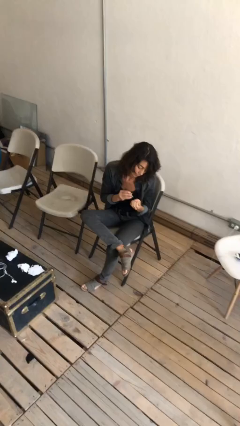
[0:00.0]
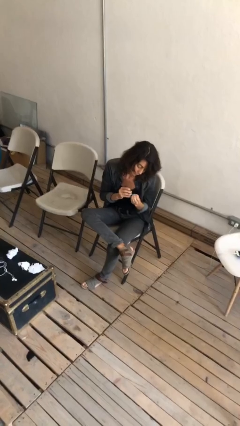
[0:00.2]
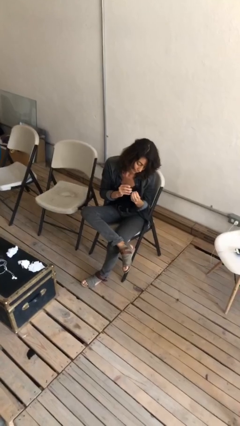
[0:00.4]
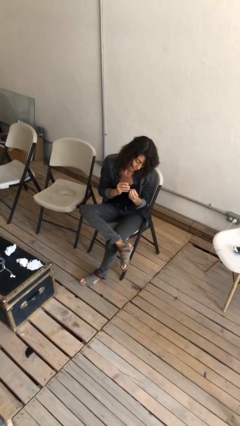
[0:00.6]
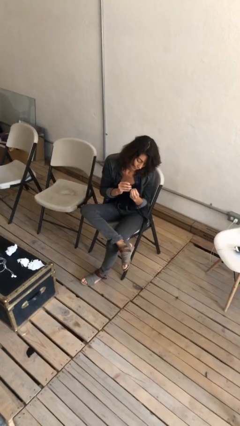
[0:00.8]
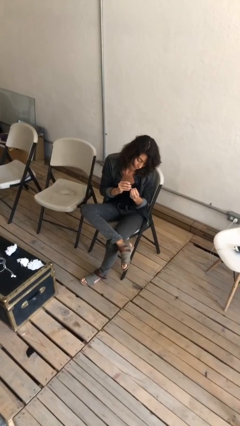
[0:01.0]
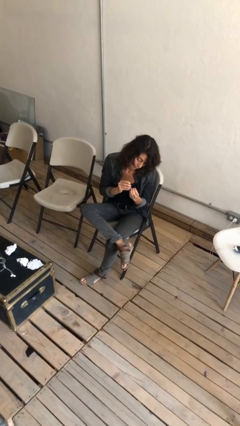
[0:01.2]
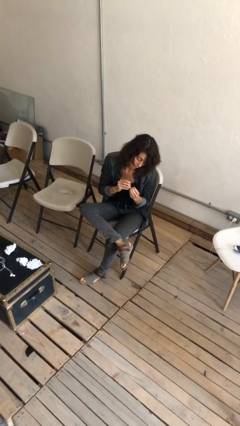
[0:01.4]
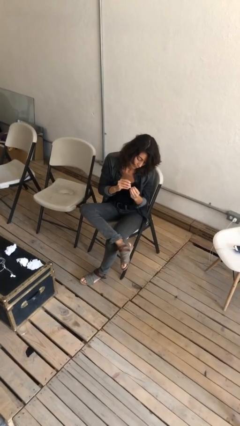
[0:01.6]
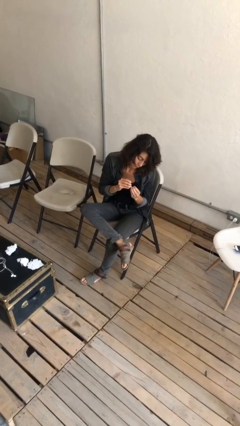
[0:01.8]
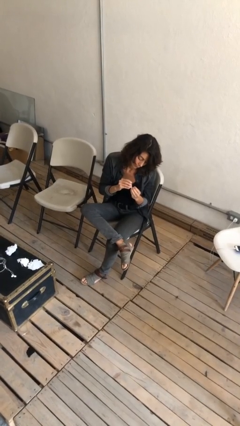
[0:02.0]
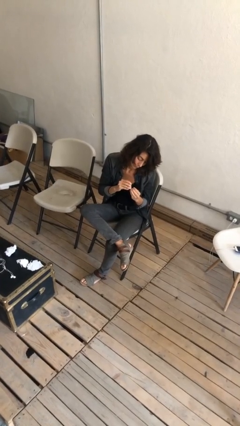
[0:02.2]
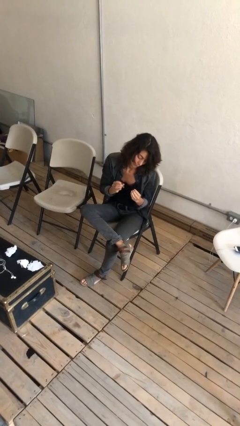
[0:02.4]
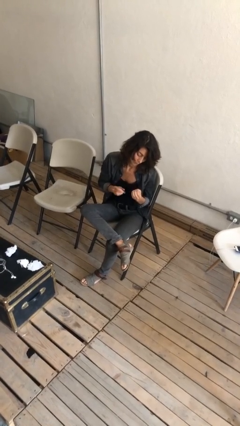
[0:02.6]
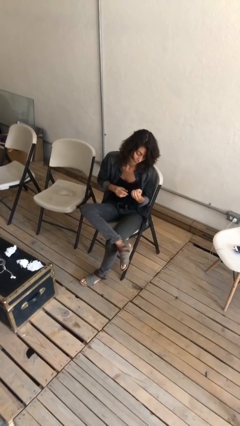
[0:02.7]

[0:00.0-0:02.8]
person clips fingernails

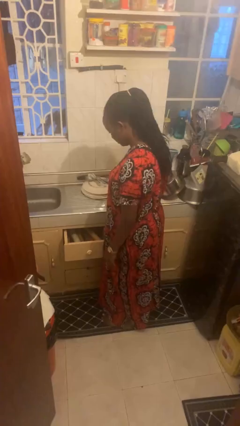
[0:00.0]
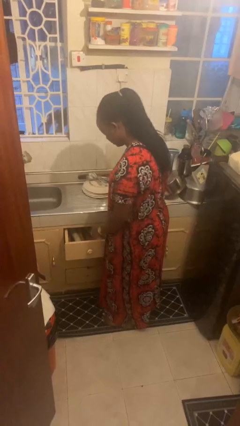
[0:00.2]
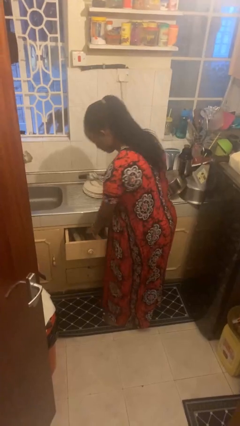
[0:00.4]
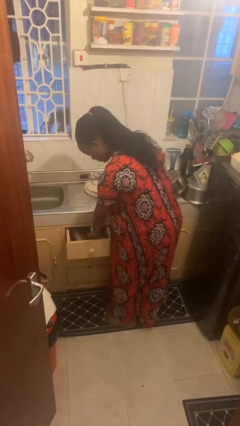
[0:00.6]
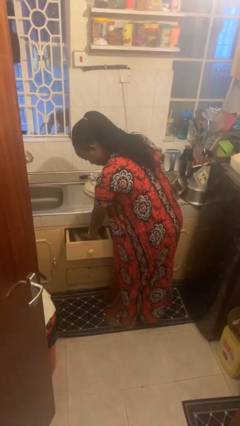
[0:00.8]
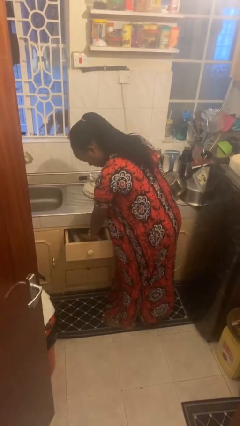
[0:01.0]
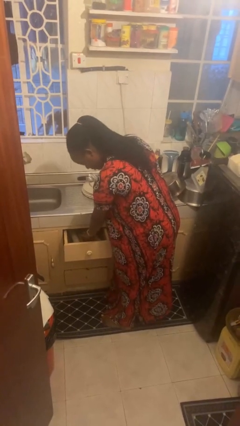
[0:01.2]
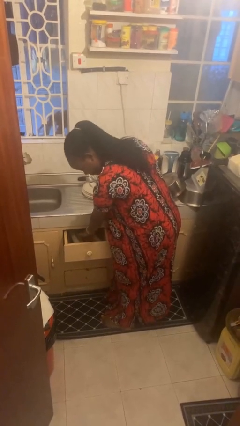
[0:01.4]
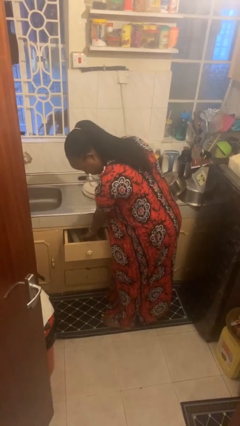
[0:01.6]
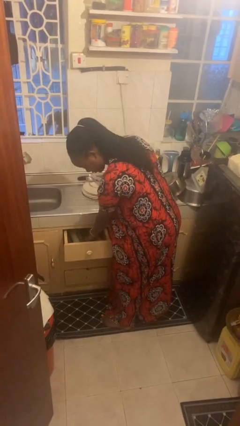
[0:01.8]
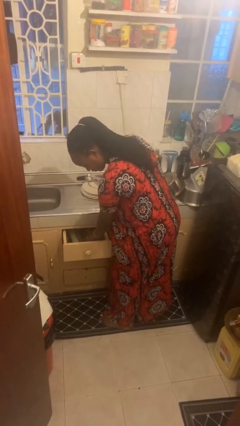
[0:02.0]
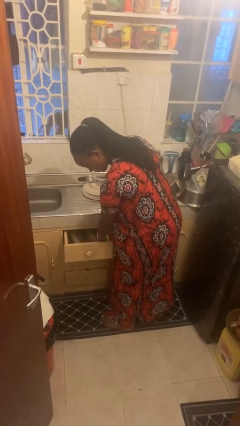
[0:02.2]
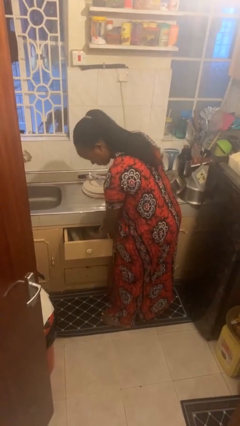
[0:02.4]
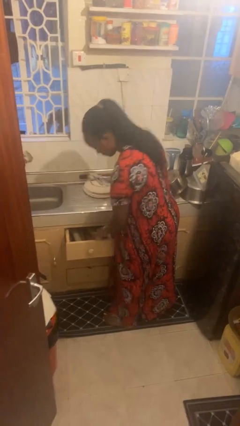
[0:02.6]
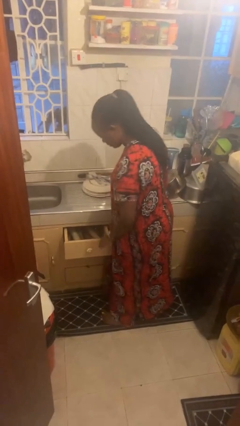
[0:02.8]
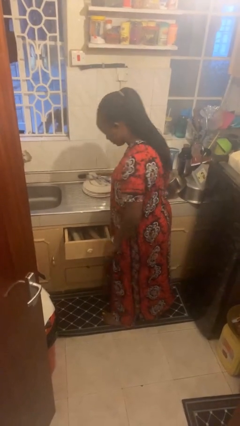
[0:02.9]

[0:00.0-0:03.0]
person searches in kitchen drawer

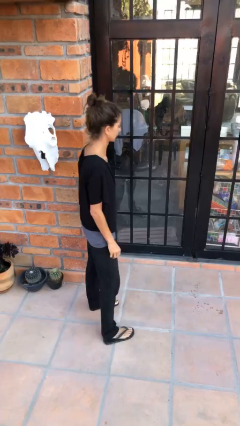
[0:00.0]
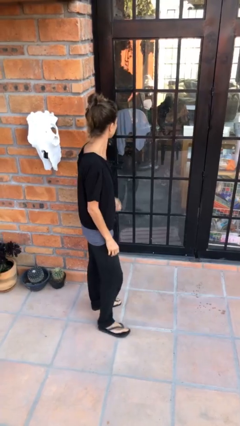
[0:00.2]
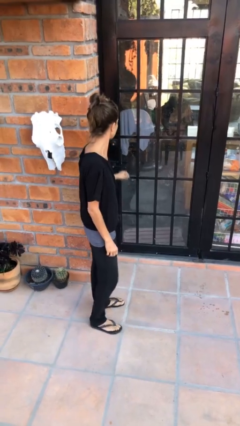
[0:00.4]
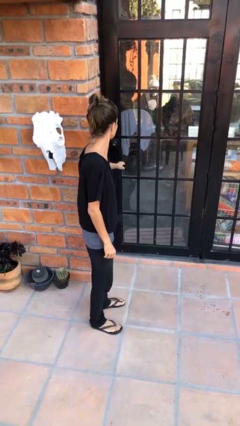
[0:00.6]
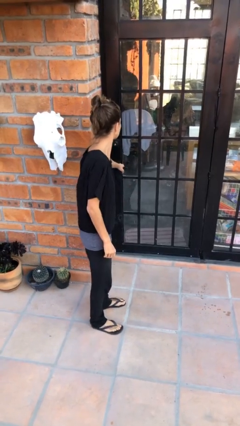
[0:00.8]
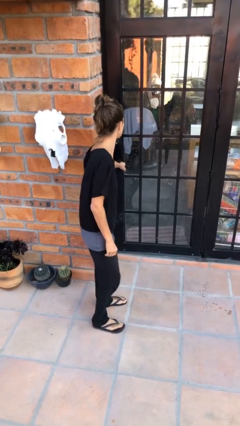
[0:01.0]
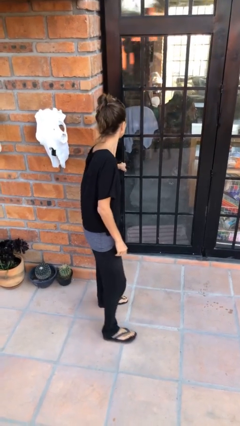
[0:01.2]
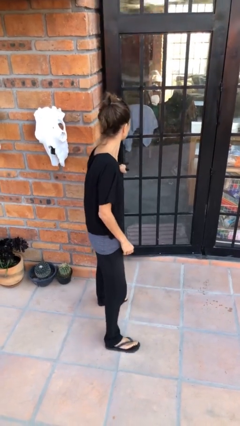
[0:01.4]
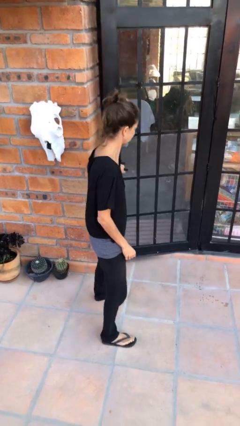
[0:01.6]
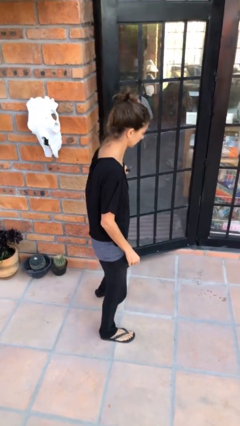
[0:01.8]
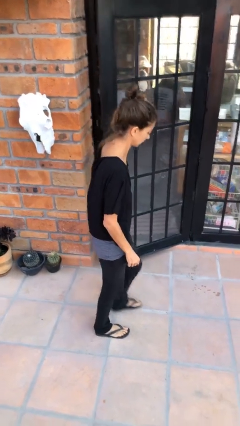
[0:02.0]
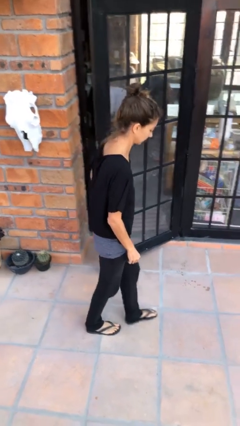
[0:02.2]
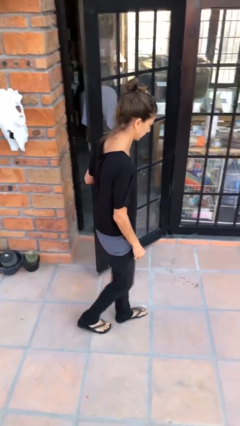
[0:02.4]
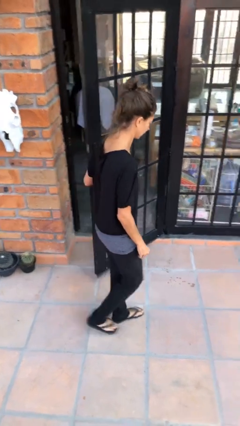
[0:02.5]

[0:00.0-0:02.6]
person opens facility door

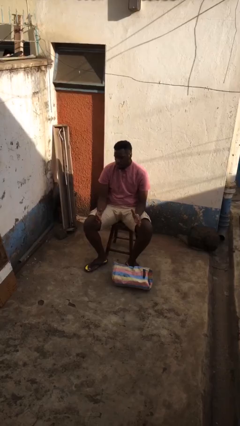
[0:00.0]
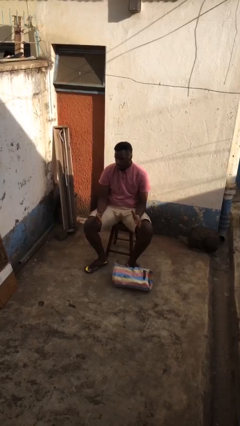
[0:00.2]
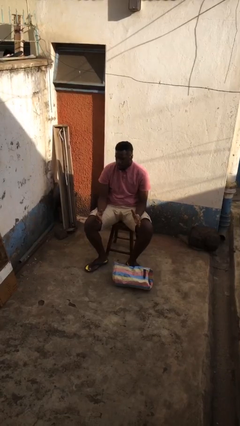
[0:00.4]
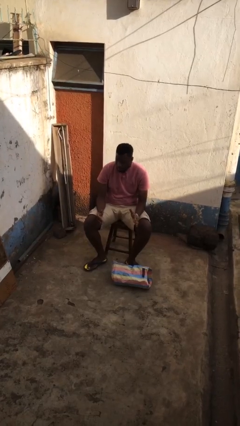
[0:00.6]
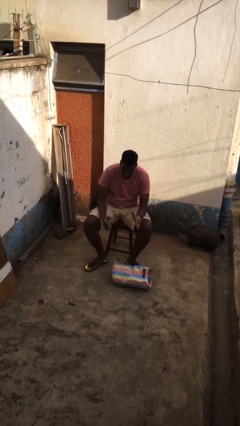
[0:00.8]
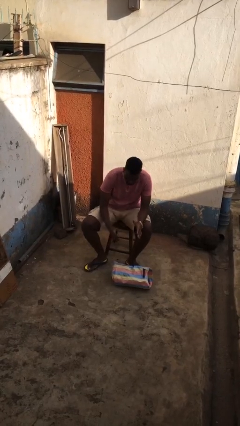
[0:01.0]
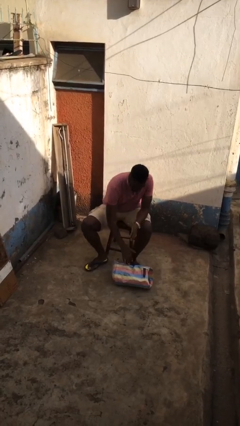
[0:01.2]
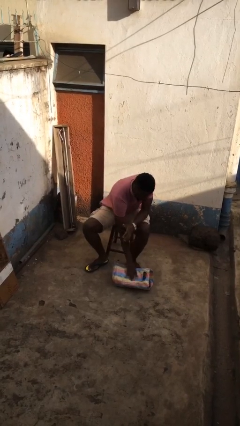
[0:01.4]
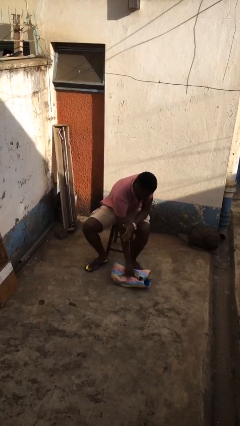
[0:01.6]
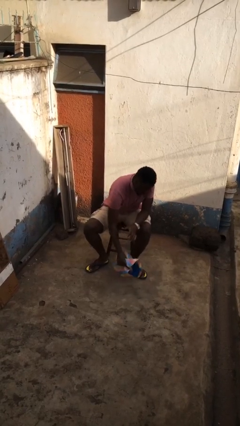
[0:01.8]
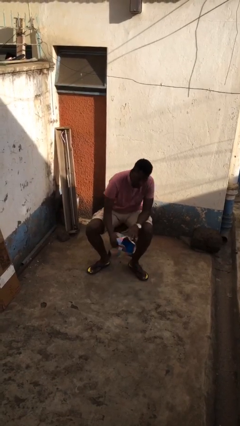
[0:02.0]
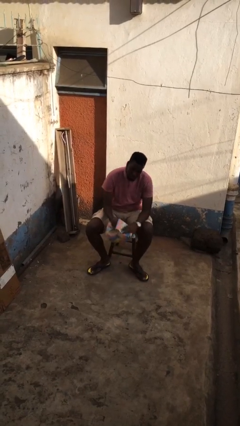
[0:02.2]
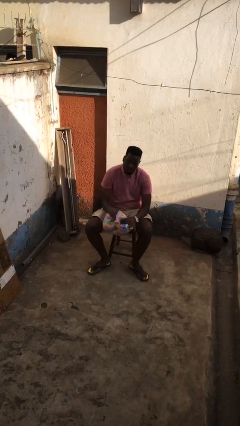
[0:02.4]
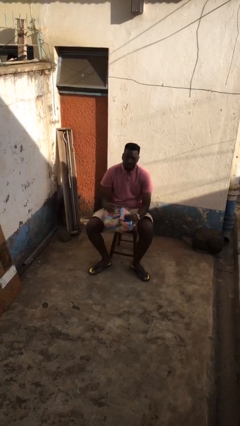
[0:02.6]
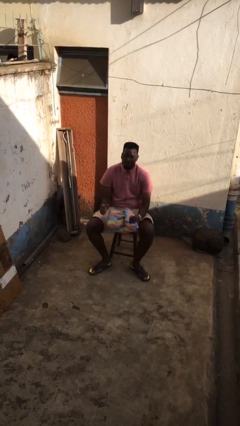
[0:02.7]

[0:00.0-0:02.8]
person picks up object from floor

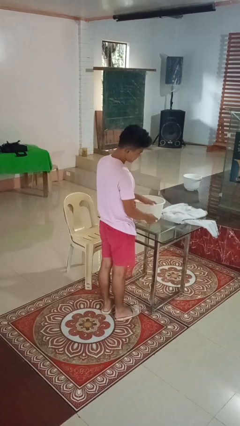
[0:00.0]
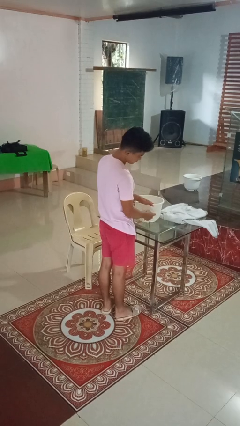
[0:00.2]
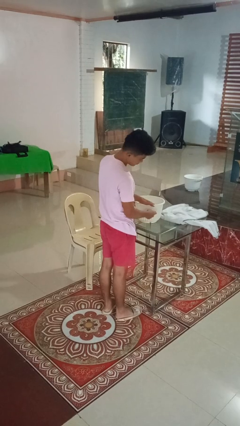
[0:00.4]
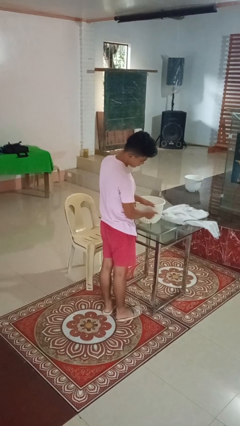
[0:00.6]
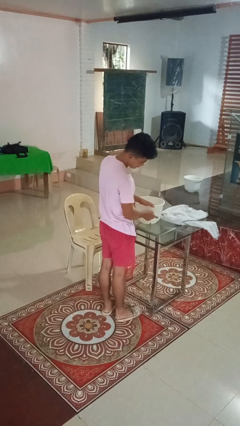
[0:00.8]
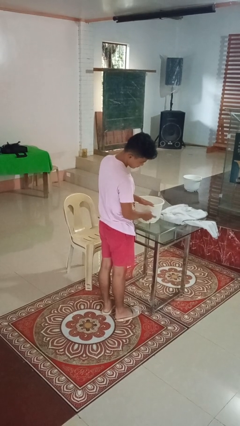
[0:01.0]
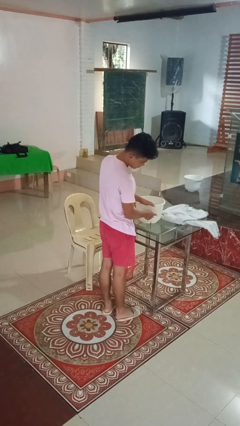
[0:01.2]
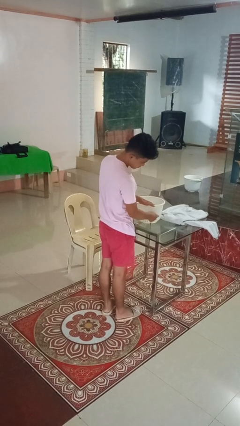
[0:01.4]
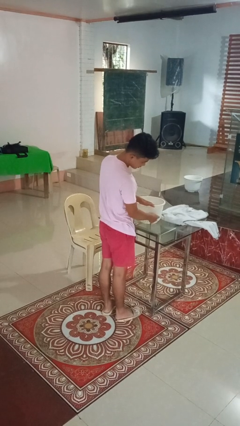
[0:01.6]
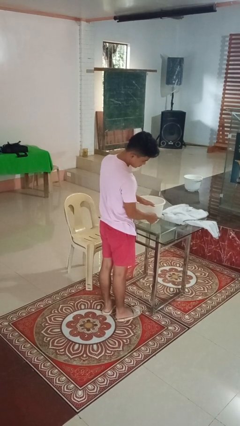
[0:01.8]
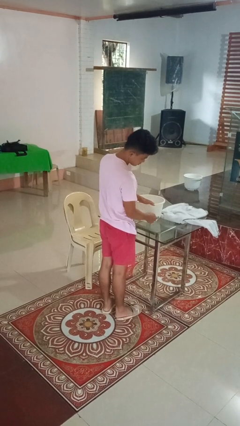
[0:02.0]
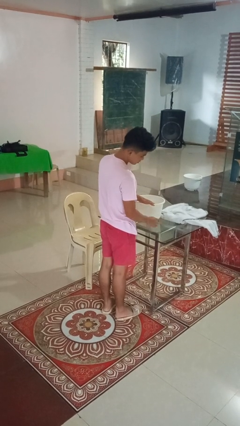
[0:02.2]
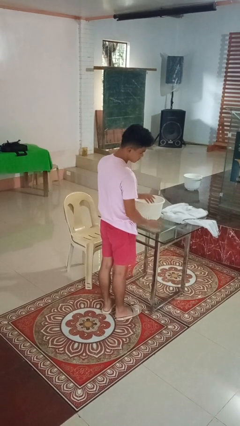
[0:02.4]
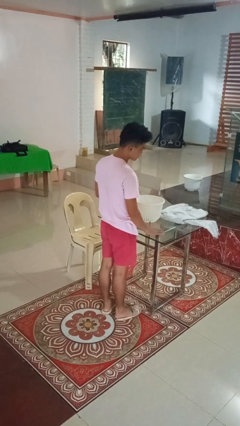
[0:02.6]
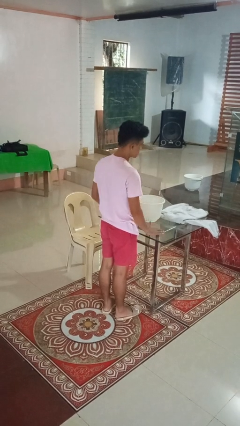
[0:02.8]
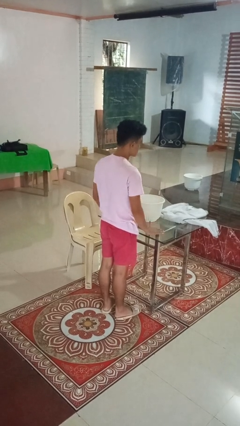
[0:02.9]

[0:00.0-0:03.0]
person taps object with finger

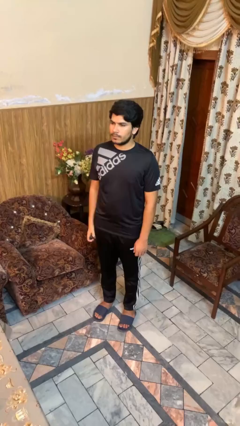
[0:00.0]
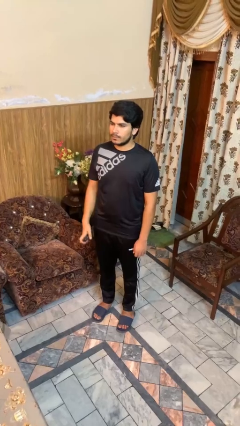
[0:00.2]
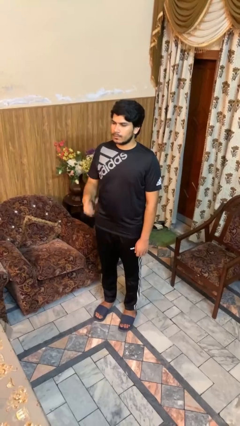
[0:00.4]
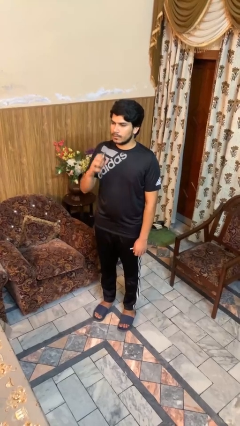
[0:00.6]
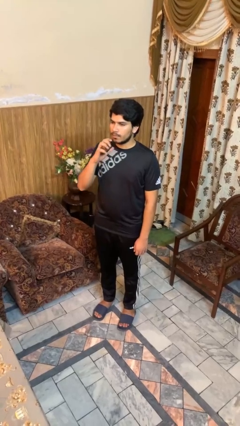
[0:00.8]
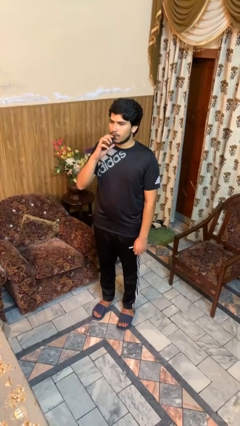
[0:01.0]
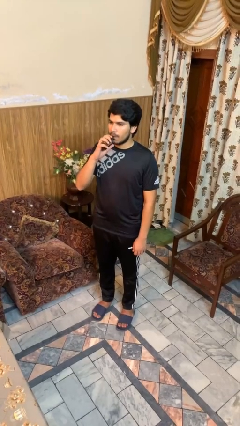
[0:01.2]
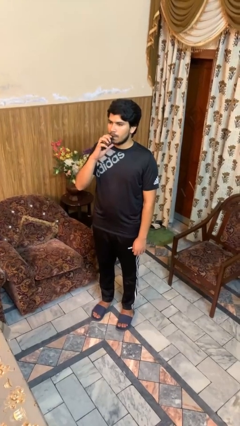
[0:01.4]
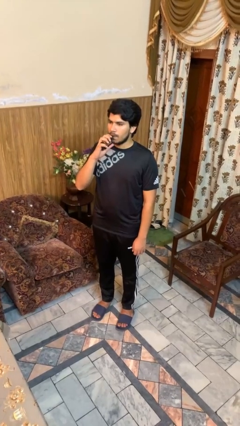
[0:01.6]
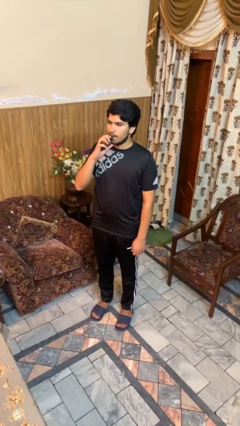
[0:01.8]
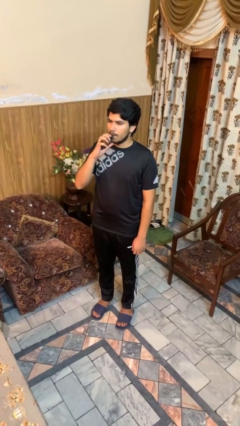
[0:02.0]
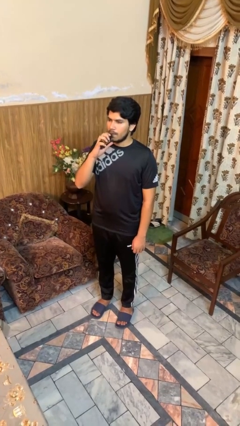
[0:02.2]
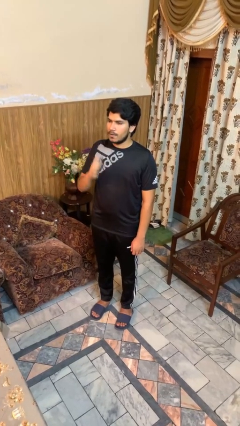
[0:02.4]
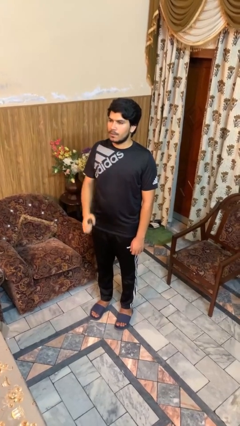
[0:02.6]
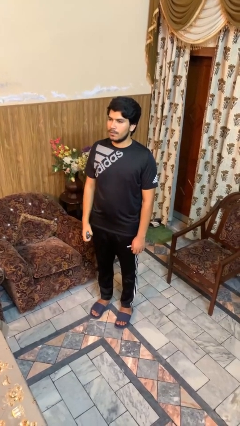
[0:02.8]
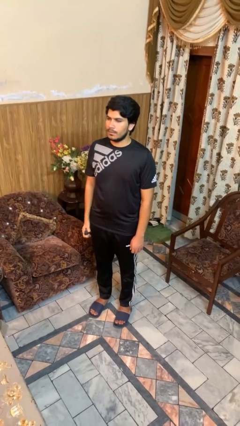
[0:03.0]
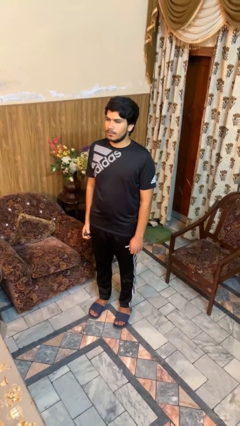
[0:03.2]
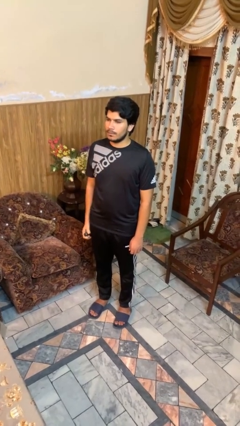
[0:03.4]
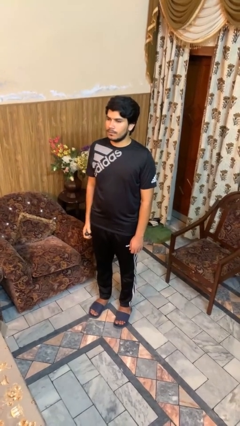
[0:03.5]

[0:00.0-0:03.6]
person vapes

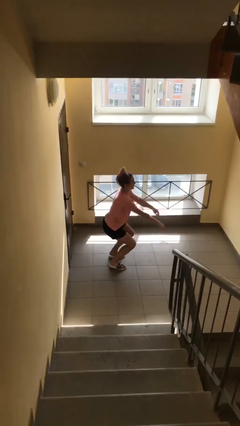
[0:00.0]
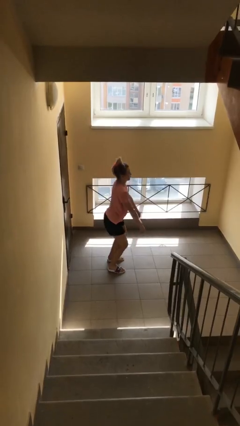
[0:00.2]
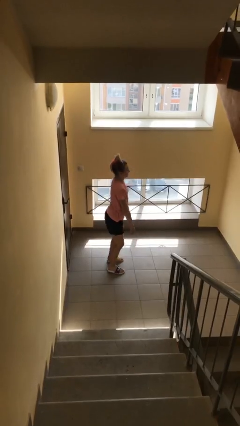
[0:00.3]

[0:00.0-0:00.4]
person stands up
